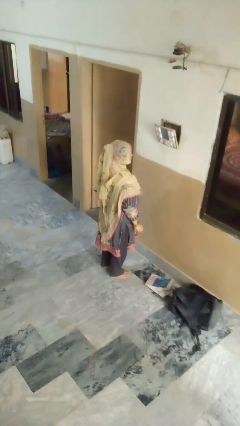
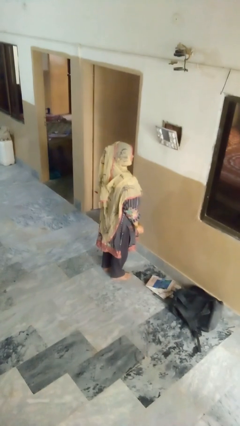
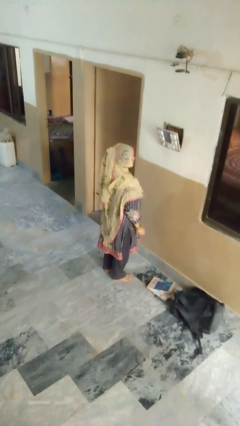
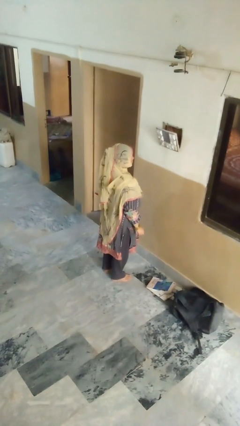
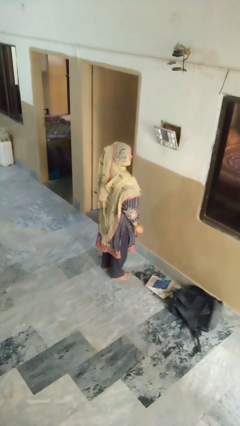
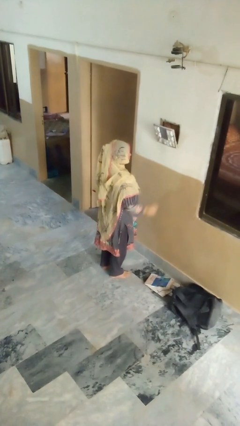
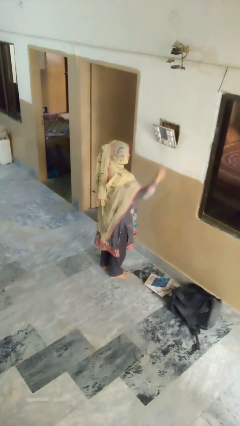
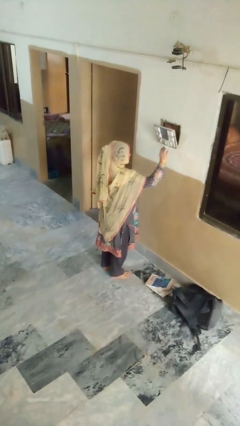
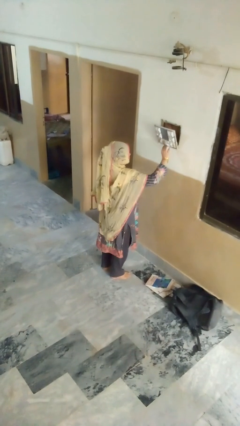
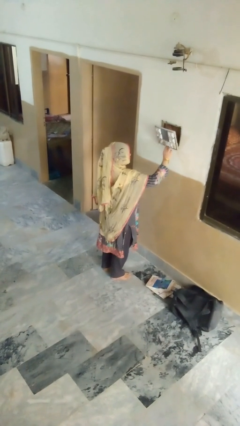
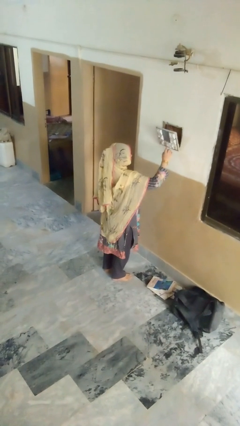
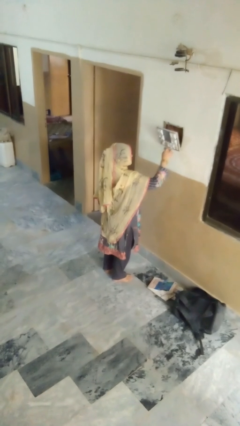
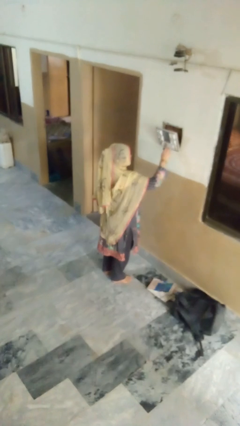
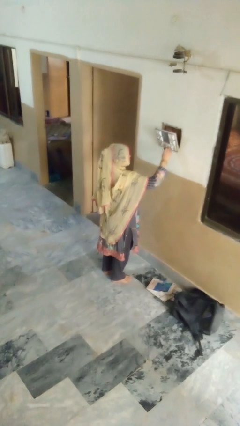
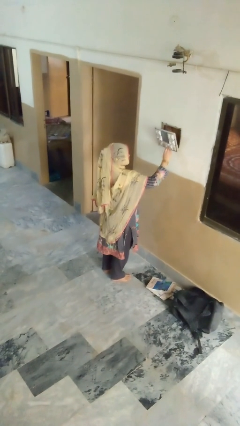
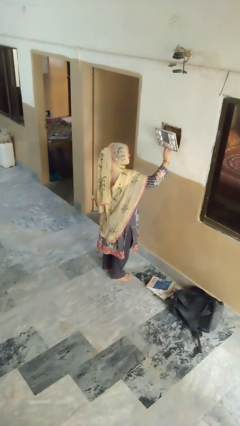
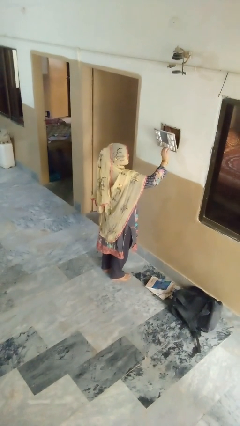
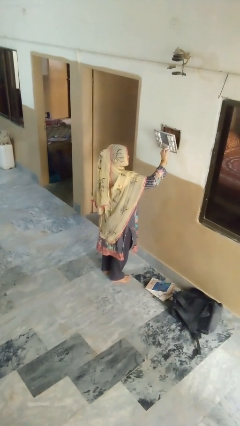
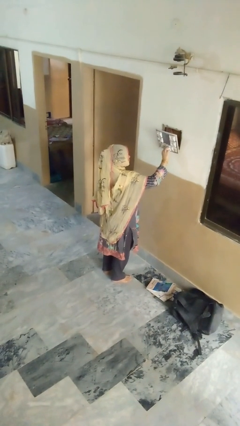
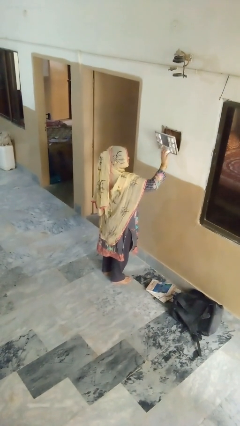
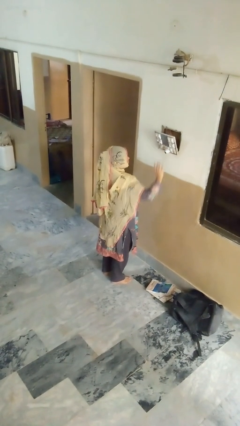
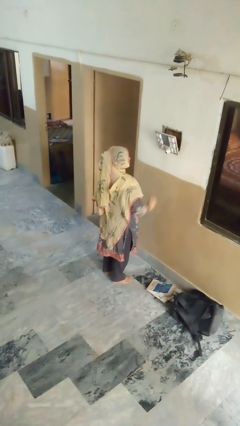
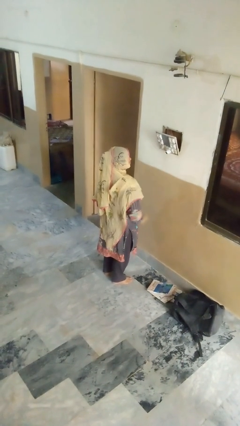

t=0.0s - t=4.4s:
person plugs into electrical socket

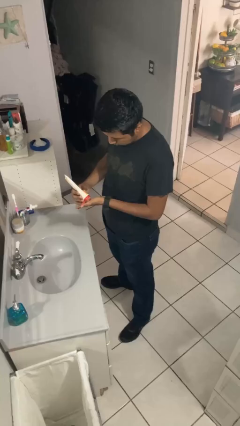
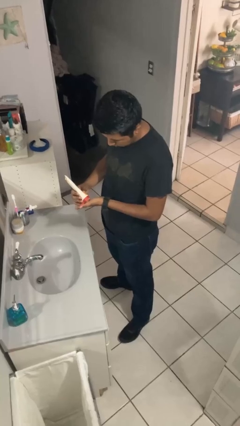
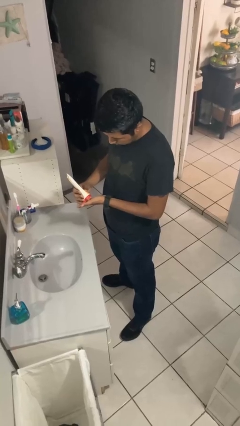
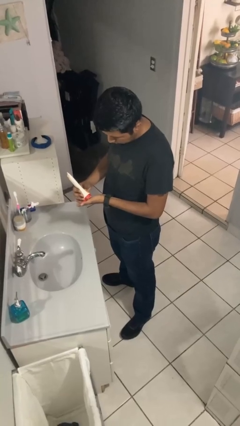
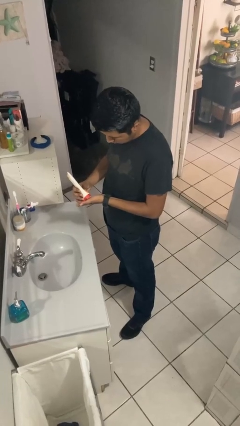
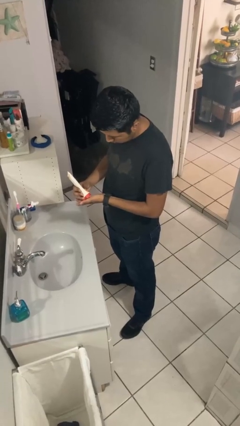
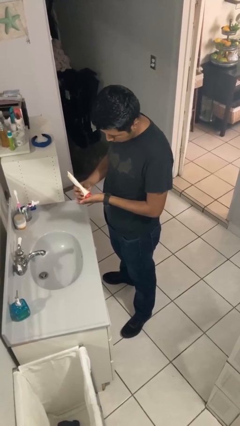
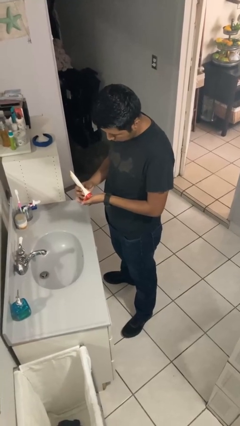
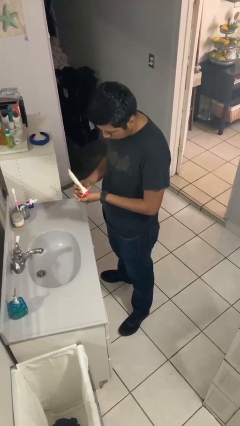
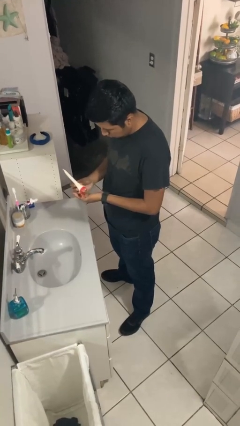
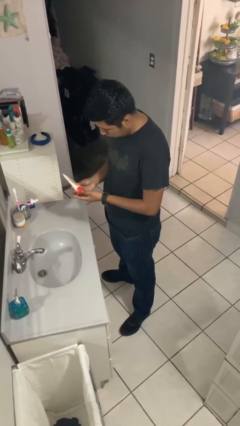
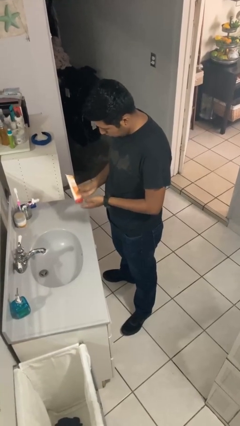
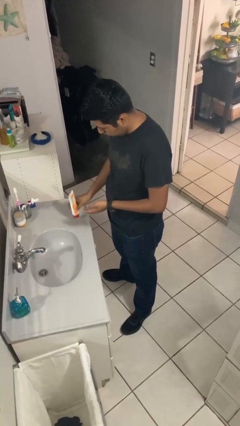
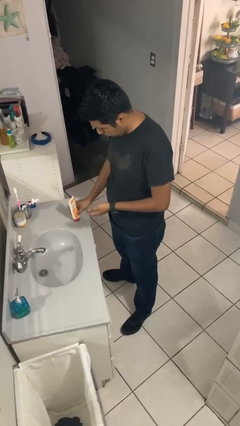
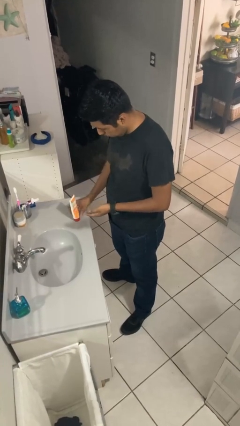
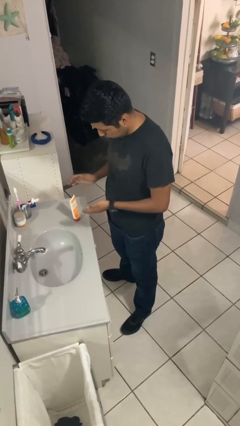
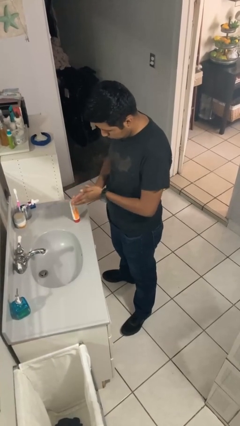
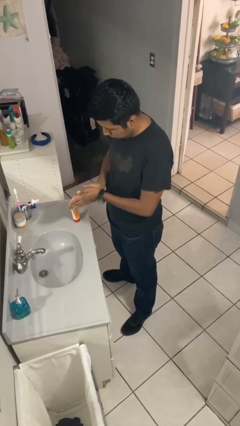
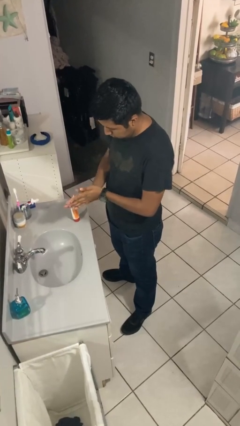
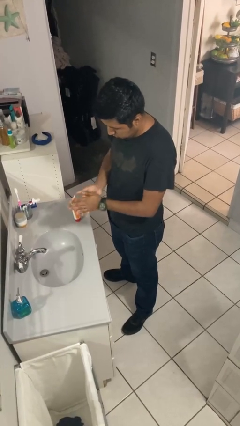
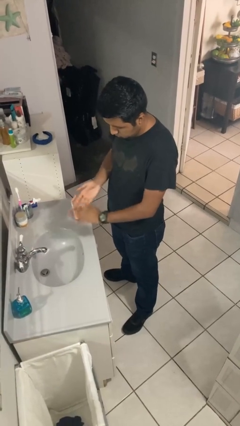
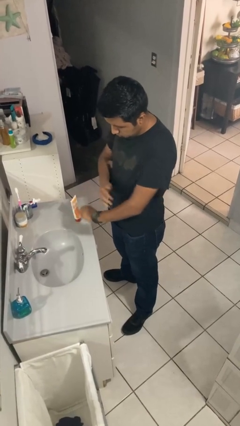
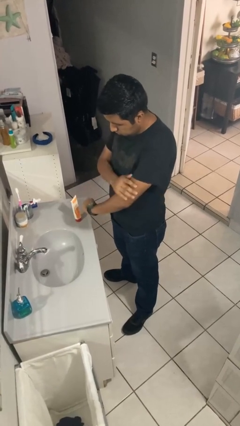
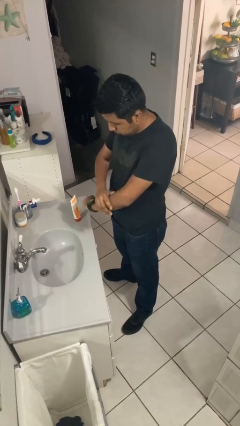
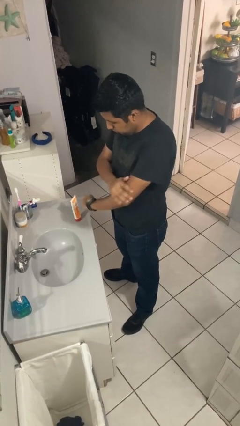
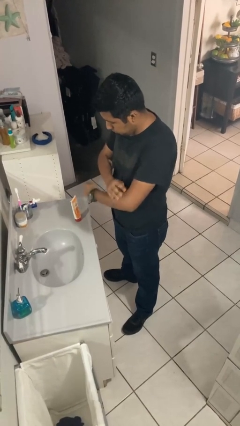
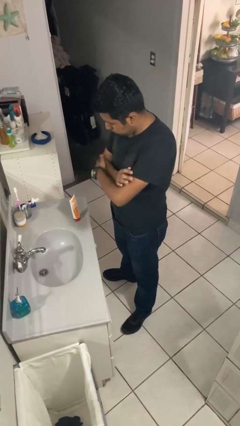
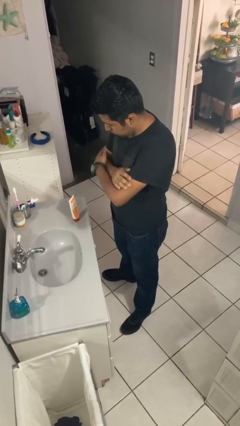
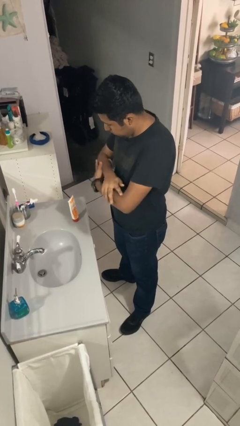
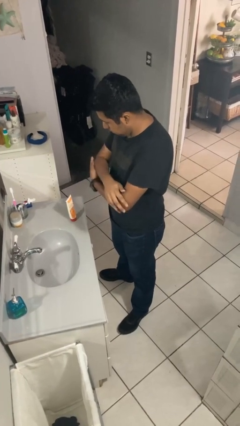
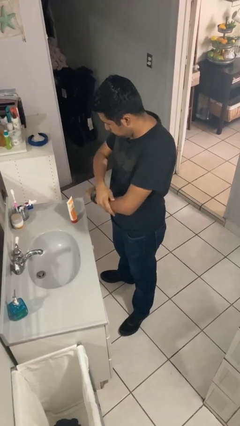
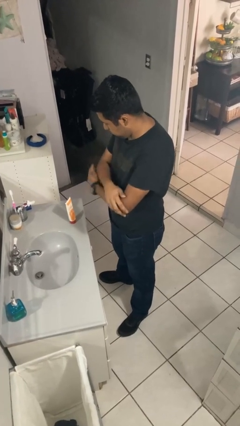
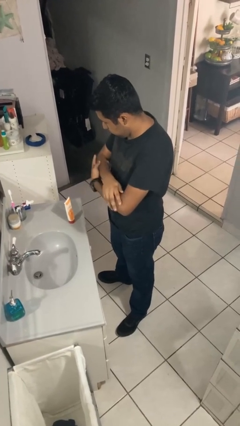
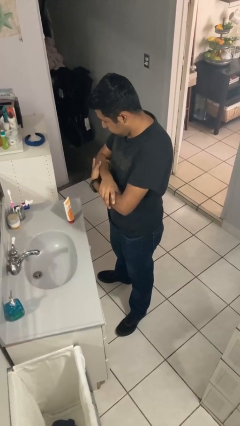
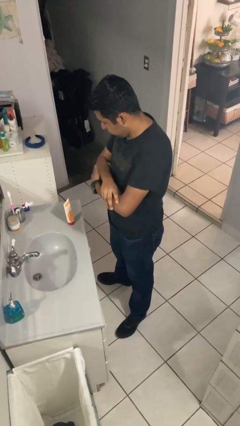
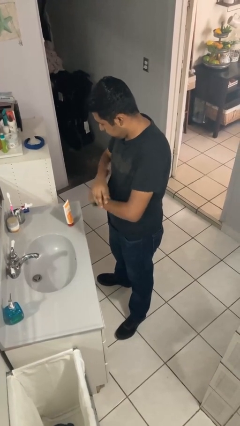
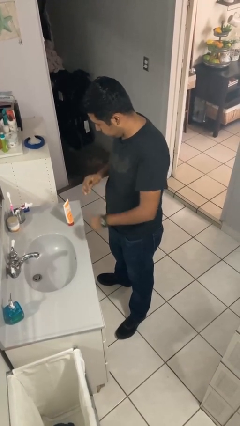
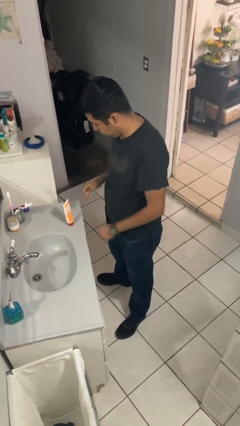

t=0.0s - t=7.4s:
person applies sunscreen

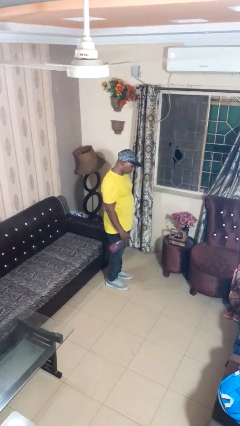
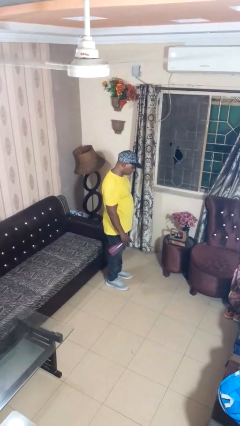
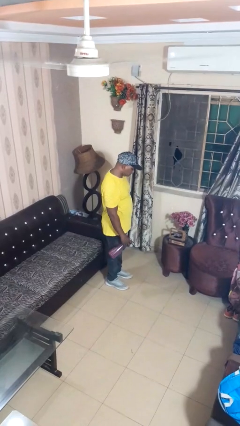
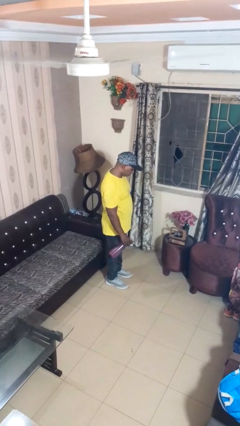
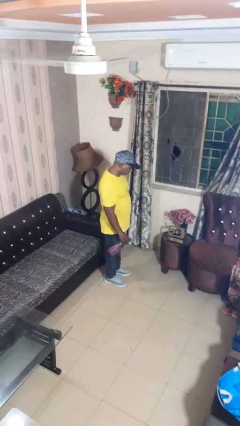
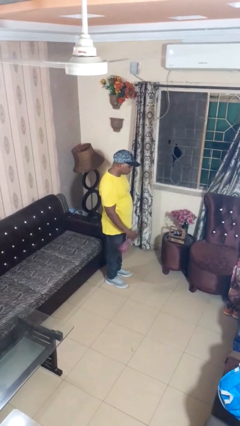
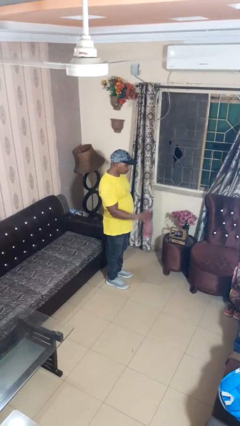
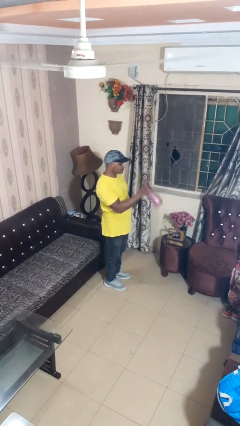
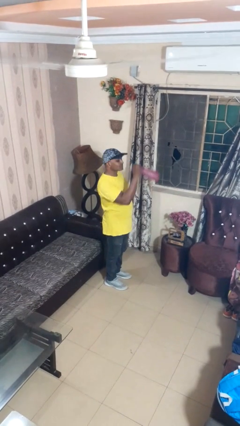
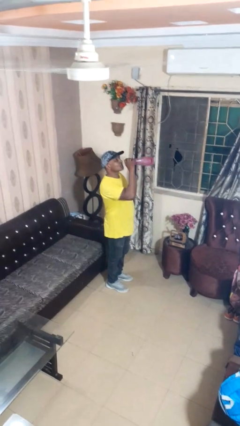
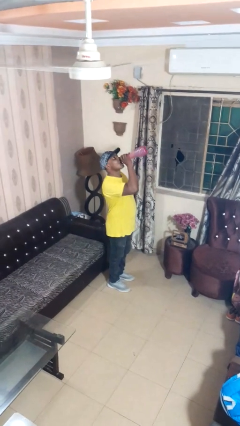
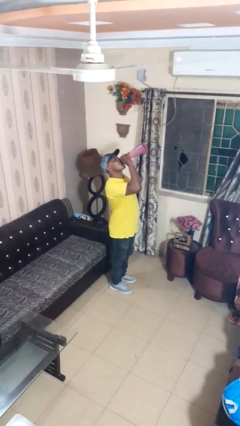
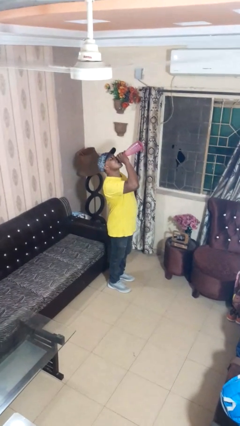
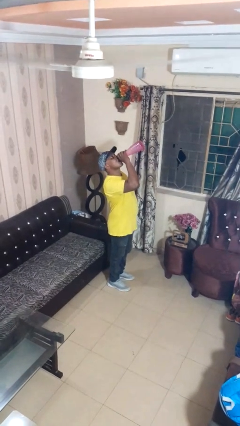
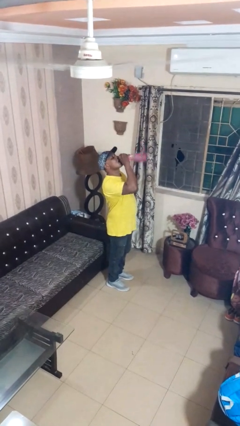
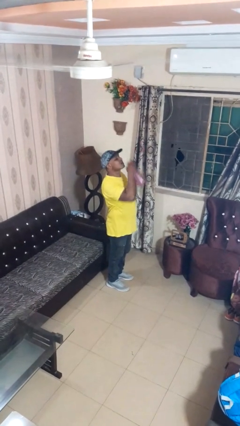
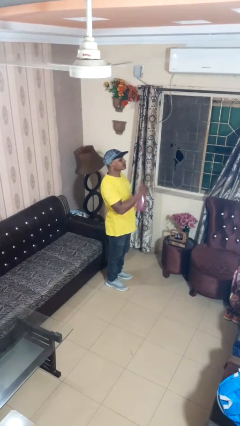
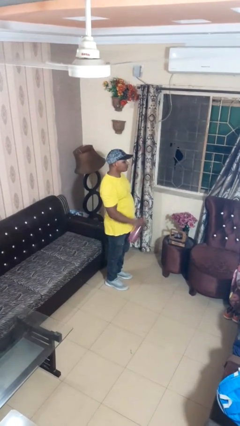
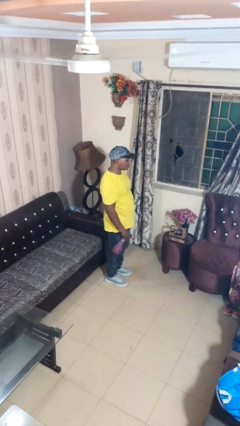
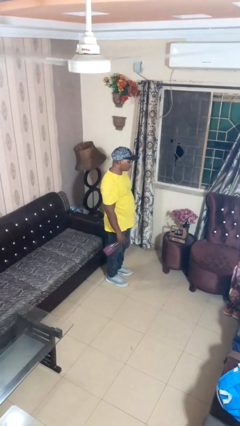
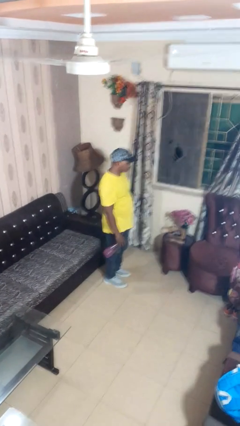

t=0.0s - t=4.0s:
person drinks from bottle

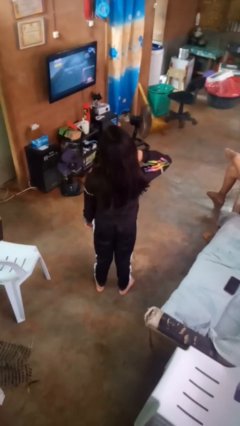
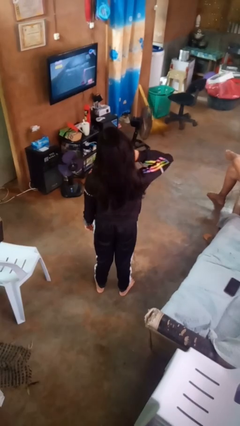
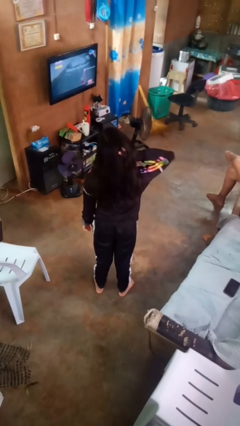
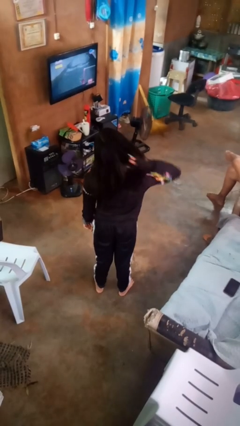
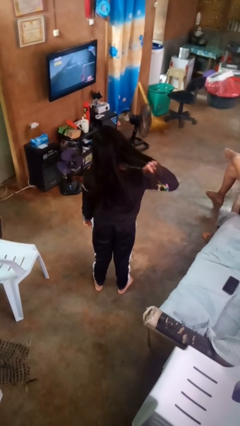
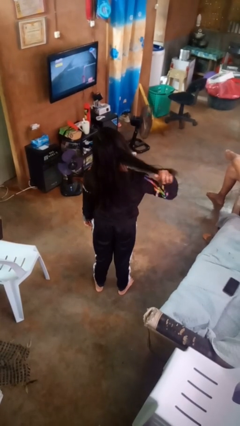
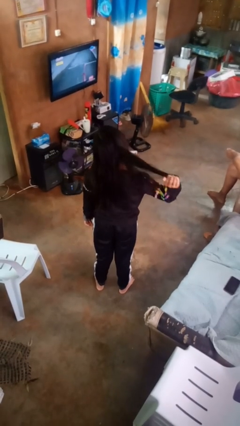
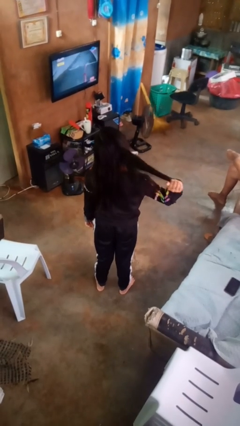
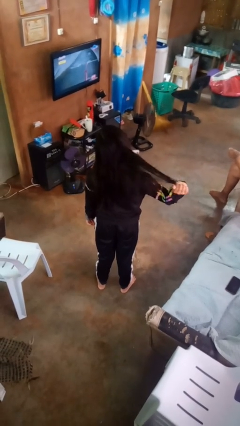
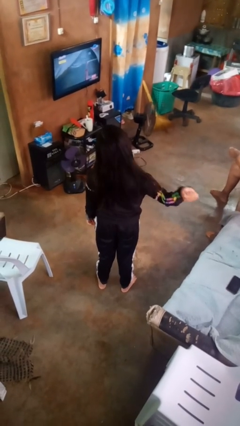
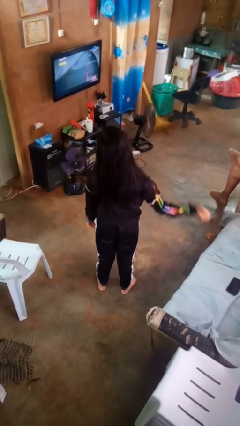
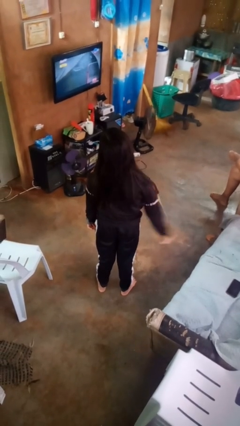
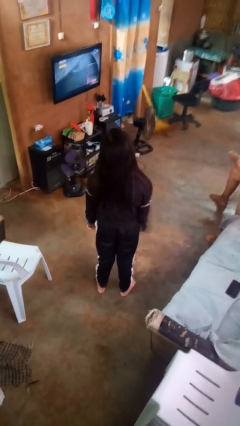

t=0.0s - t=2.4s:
person strokes hair
